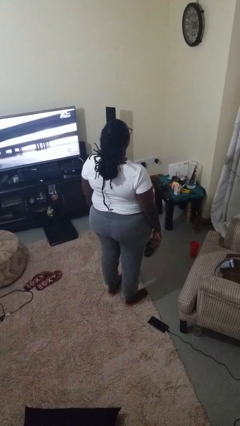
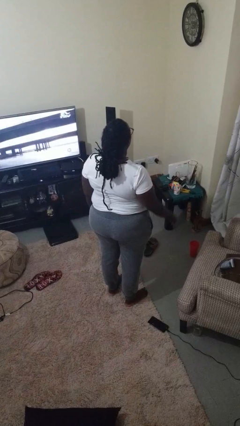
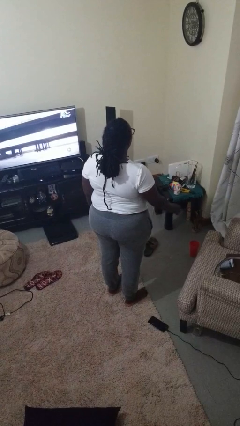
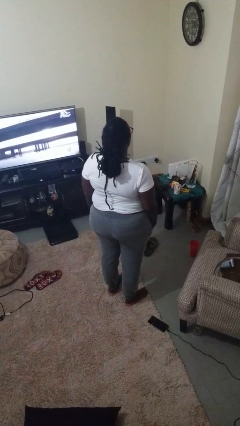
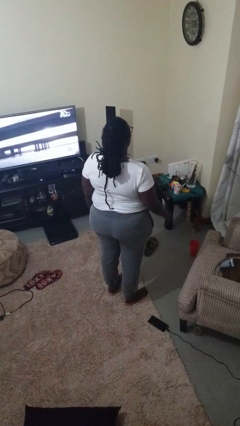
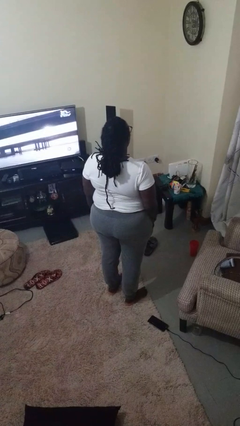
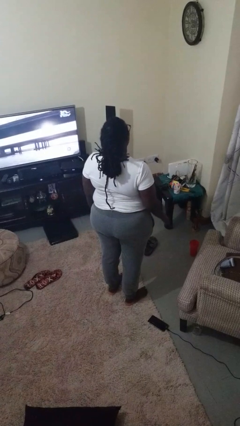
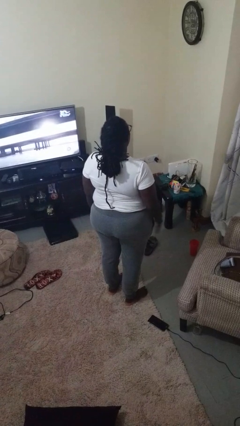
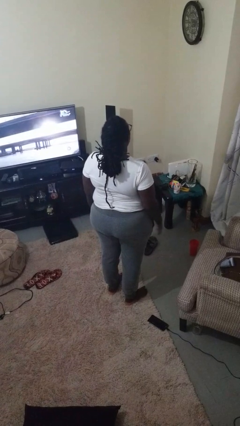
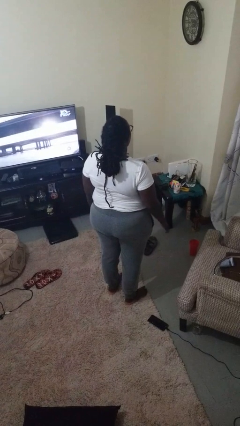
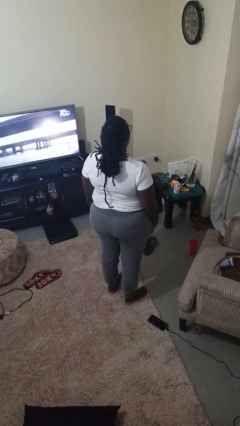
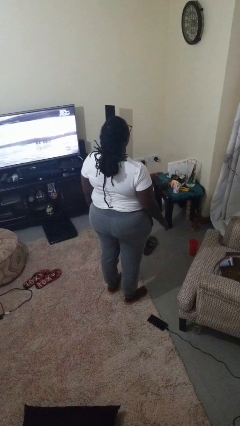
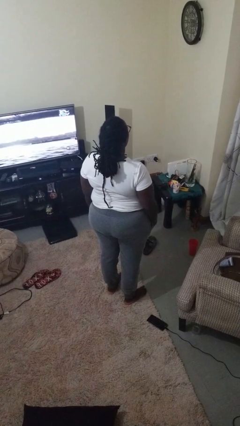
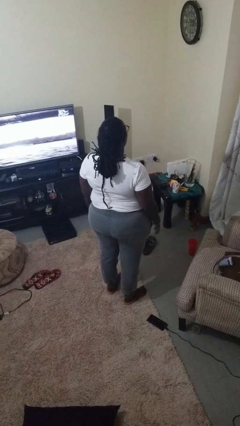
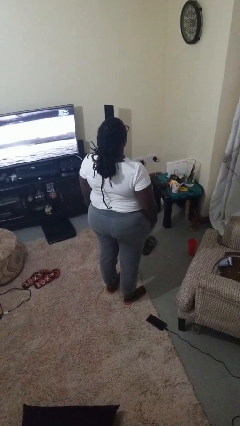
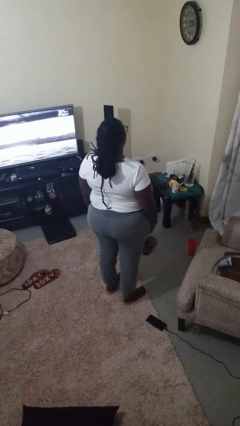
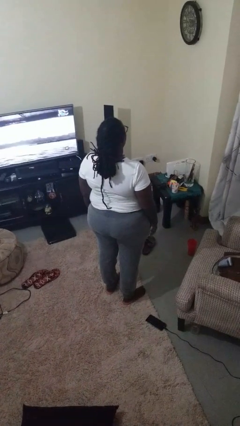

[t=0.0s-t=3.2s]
person slaps hands on thighs

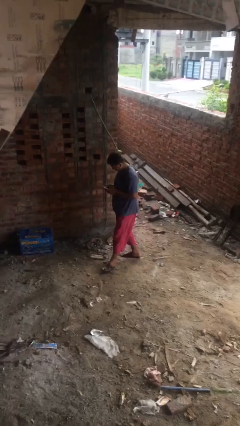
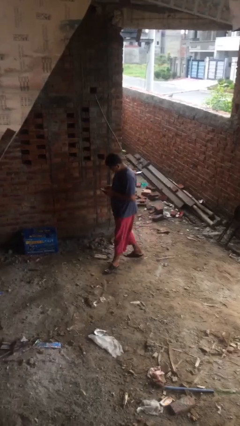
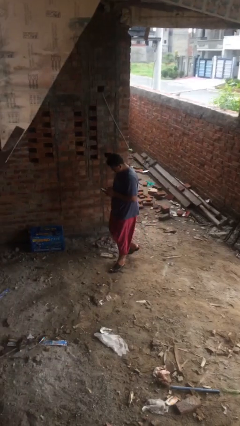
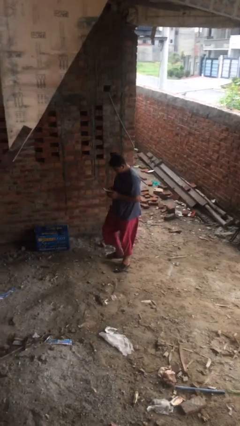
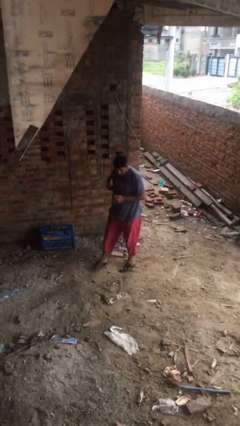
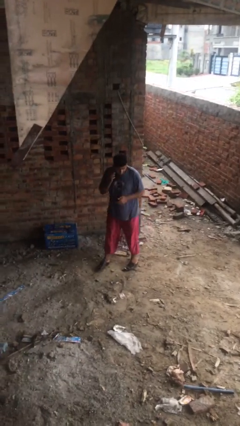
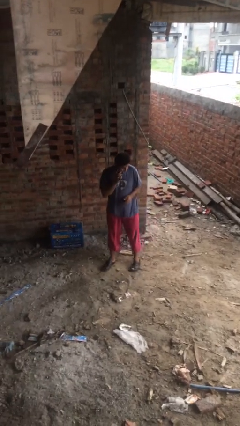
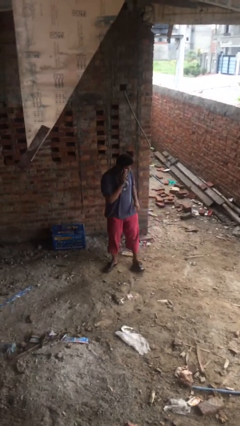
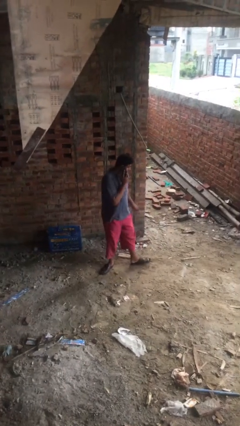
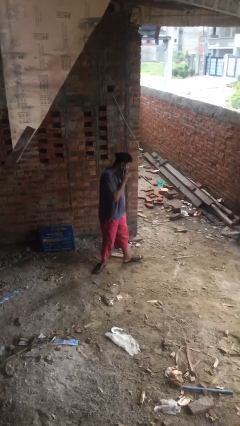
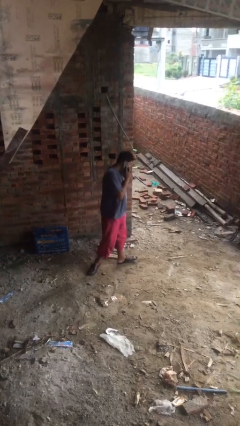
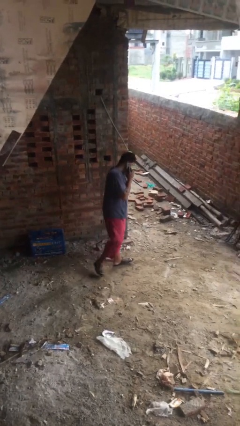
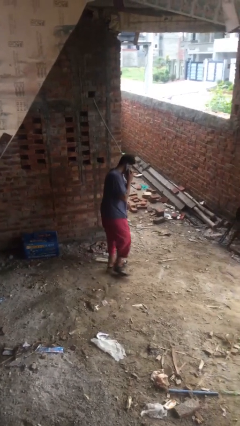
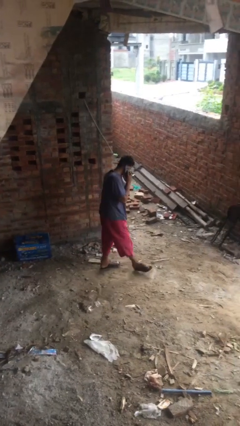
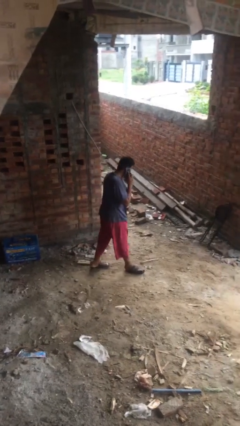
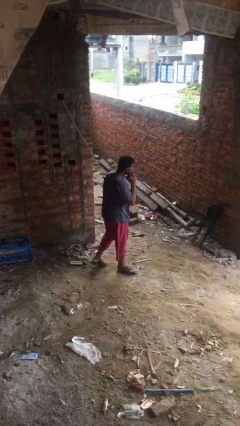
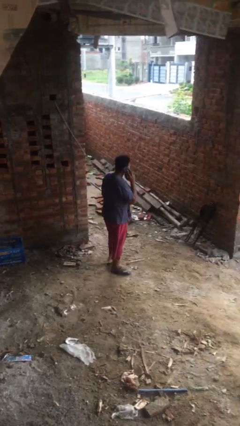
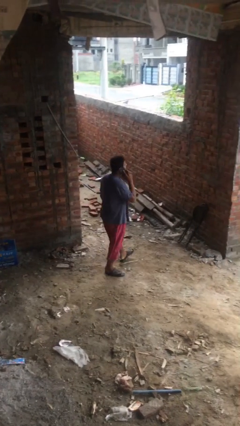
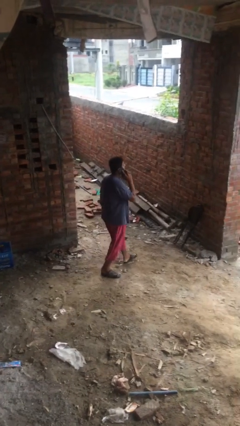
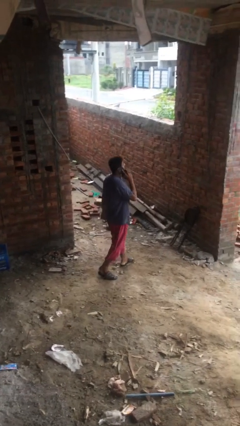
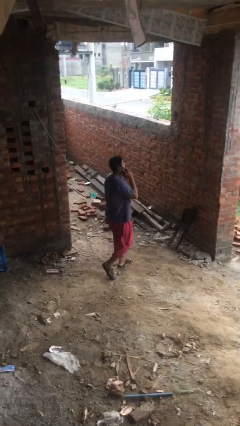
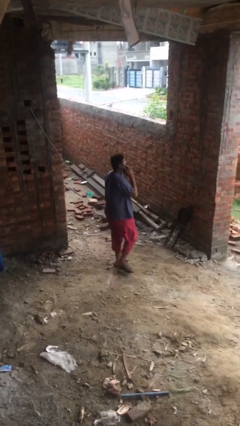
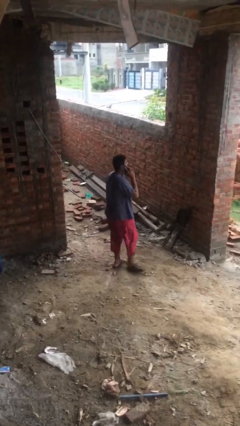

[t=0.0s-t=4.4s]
person talks on phone

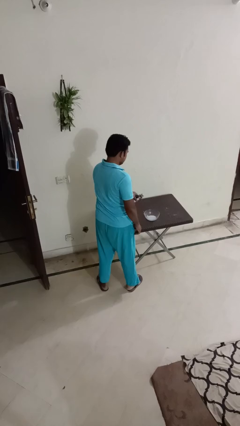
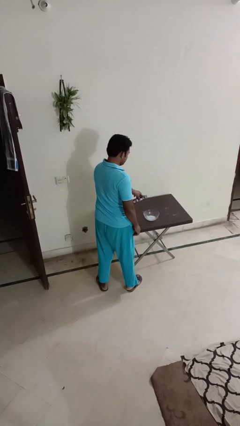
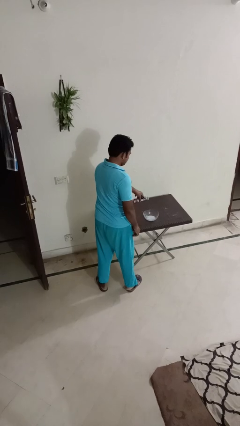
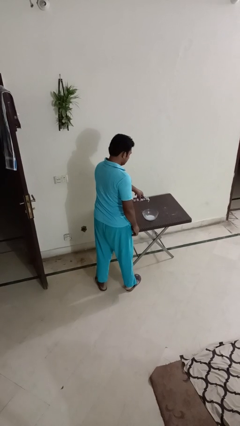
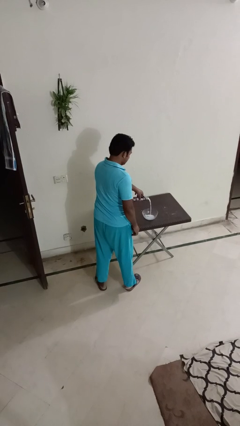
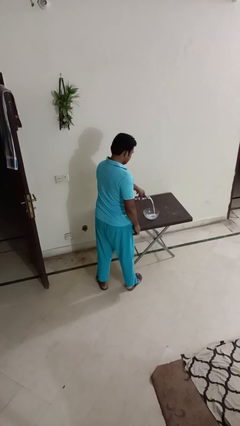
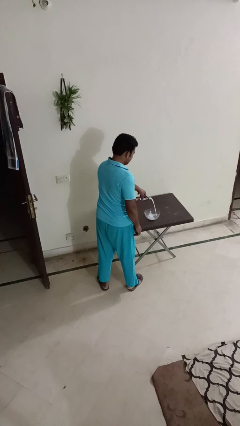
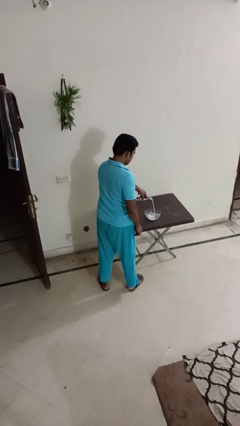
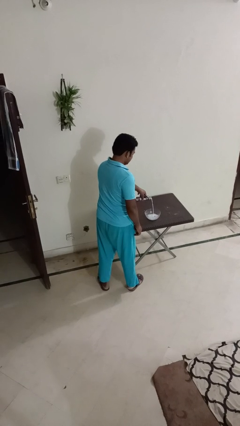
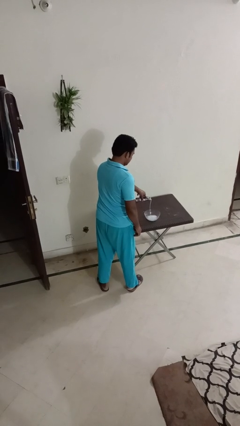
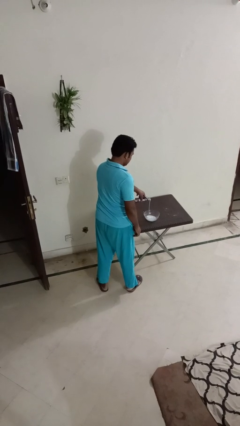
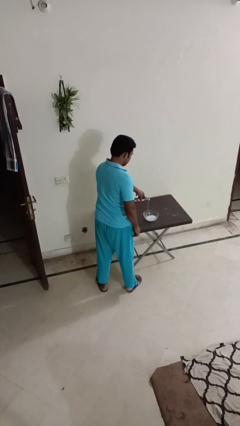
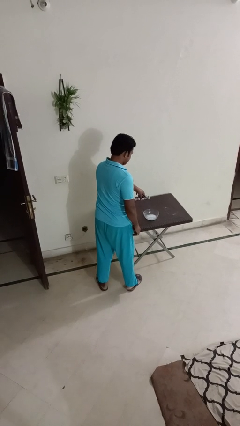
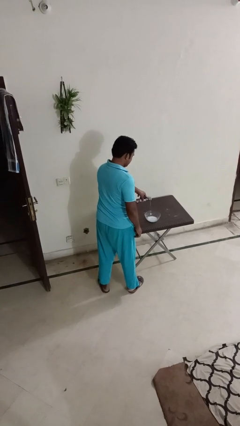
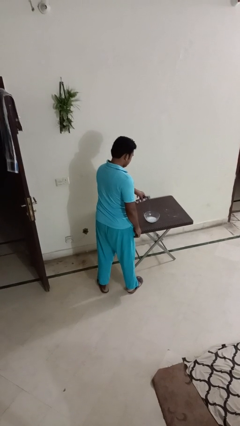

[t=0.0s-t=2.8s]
person pours into bowl

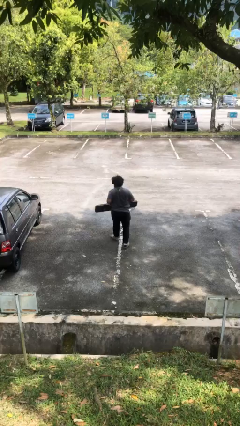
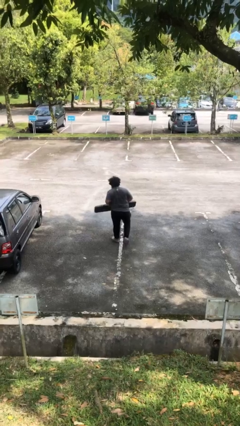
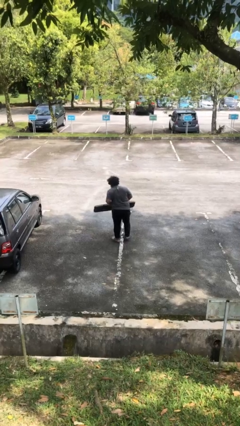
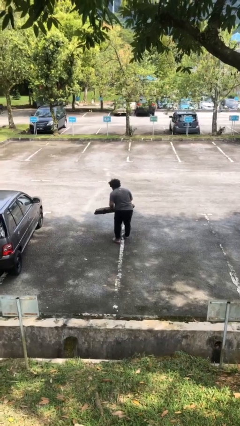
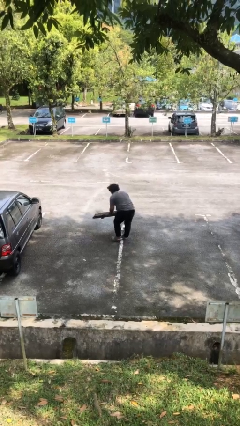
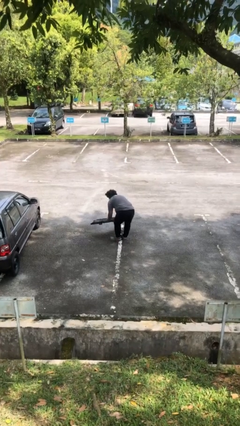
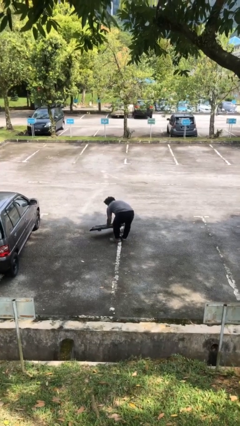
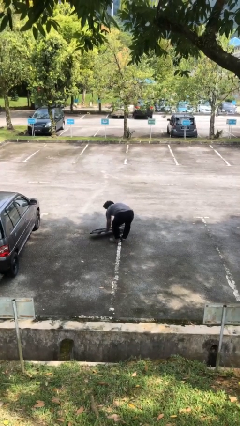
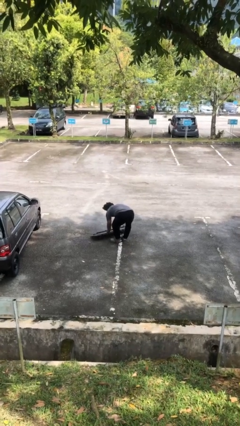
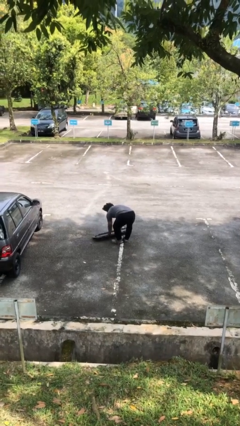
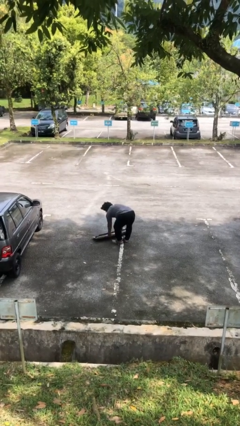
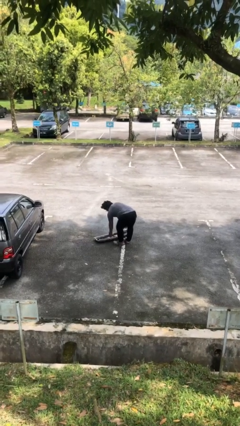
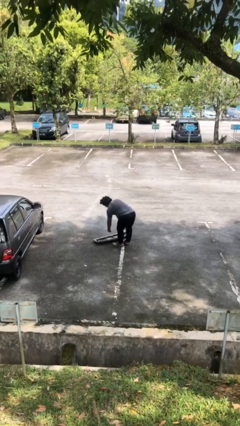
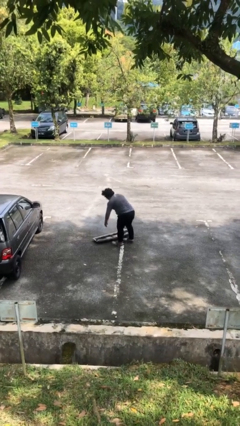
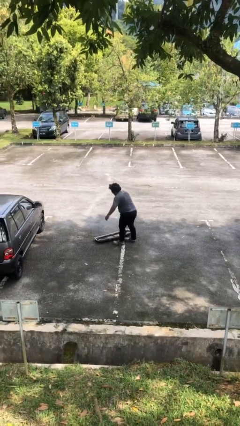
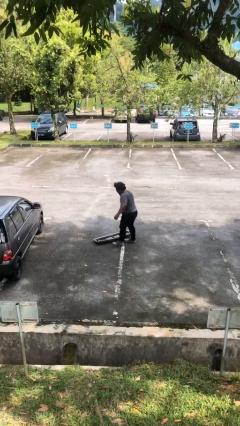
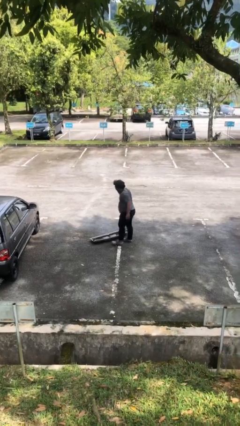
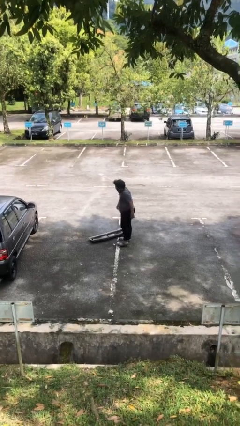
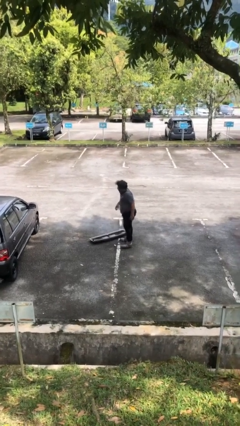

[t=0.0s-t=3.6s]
person puts down object on floor

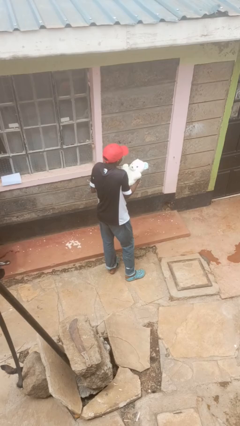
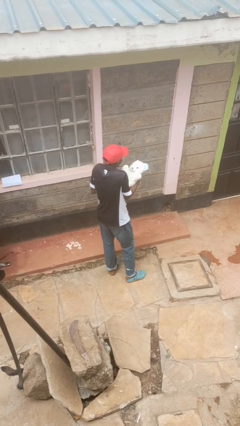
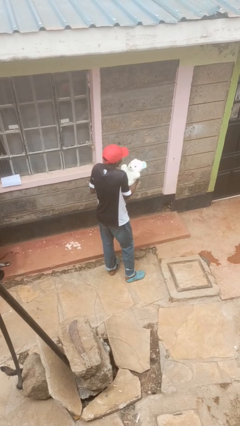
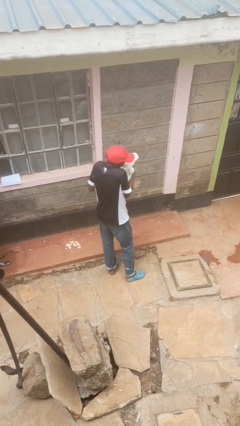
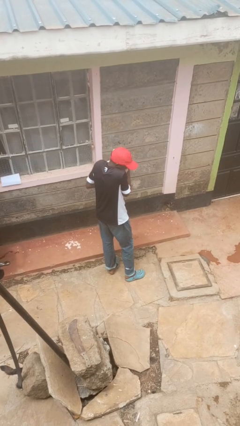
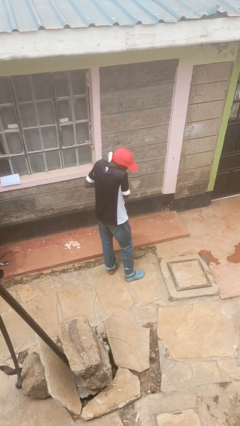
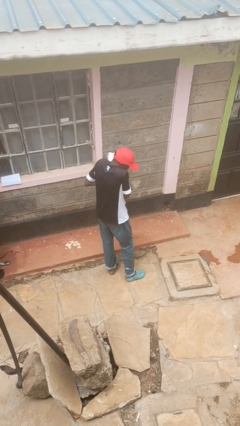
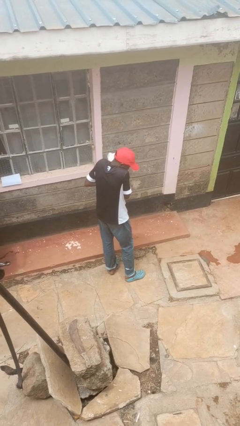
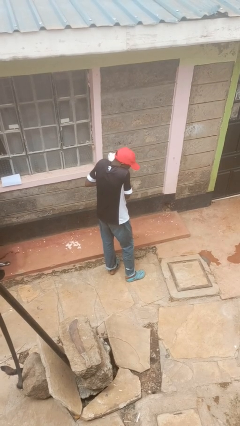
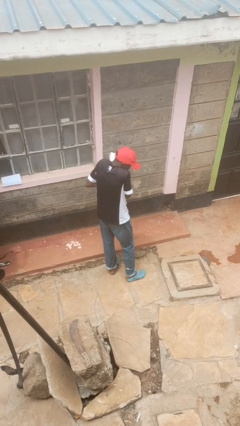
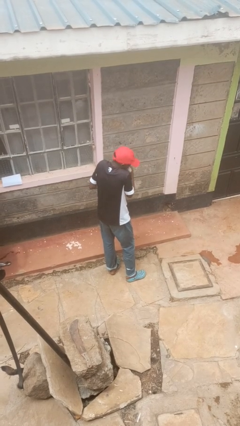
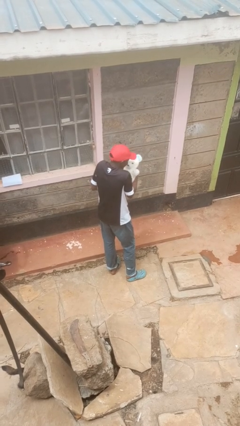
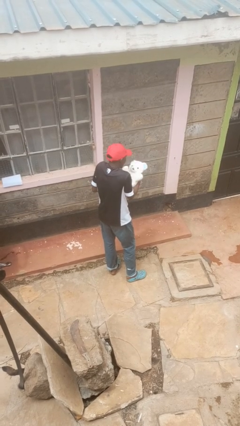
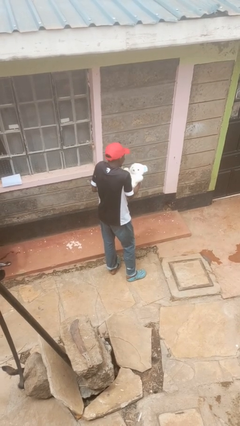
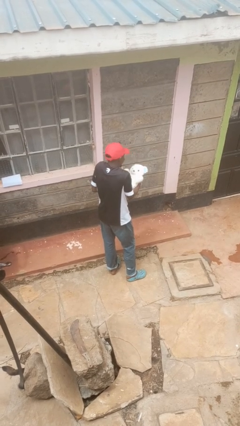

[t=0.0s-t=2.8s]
person hugs stuffed animal

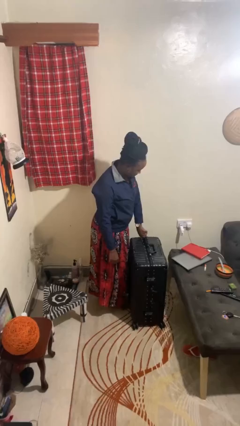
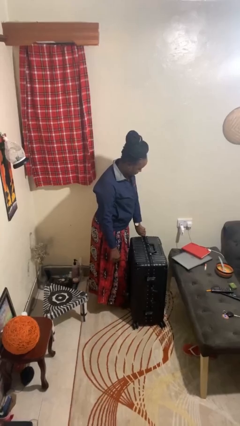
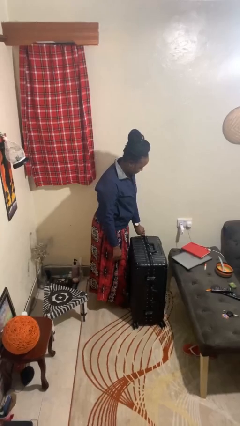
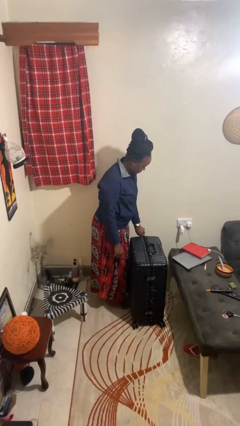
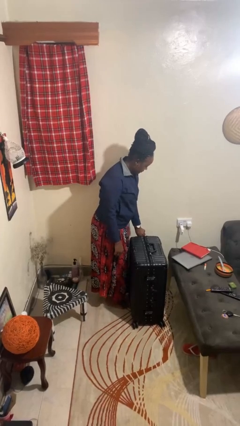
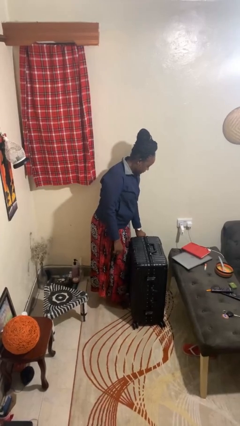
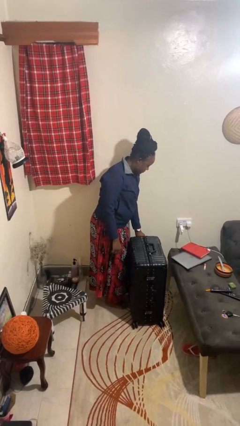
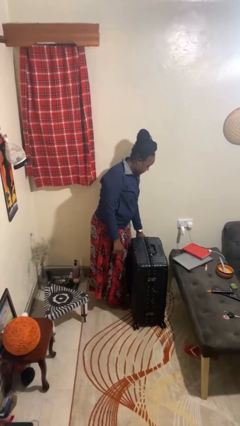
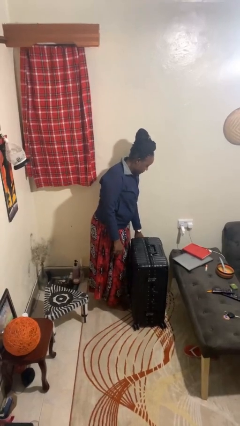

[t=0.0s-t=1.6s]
person closes suitcase
